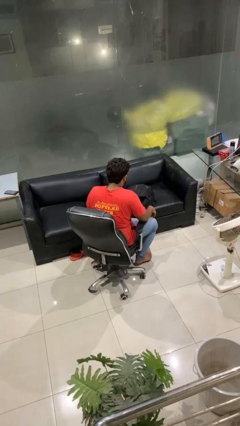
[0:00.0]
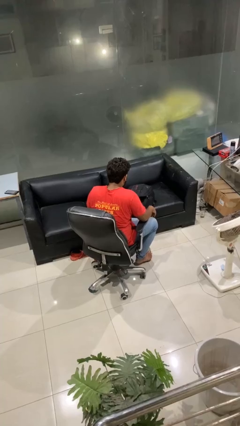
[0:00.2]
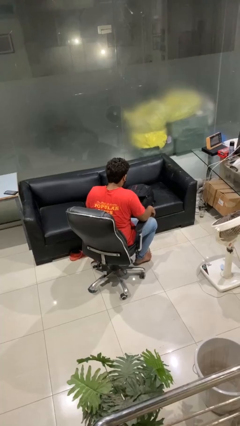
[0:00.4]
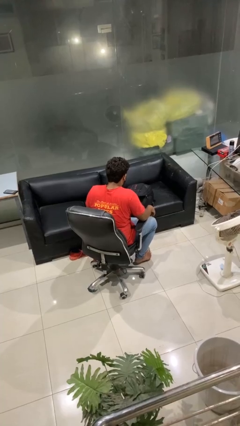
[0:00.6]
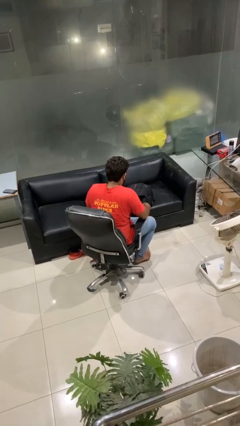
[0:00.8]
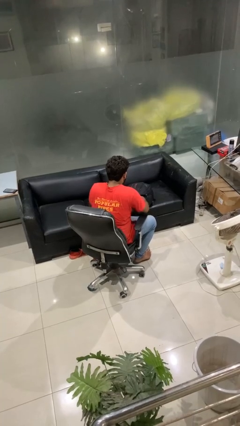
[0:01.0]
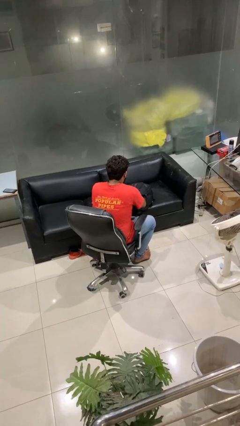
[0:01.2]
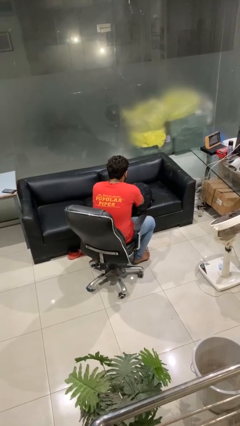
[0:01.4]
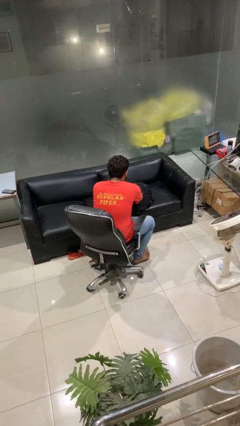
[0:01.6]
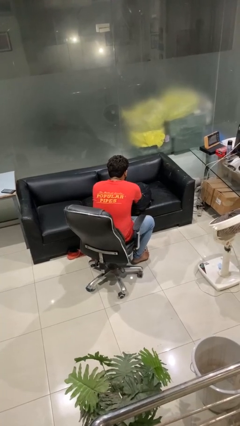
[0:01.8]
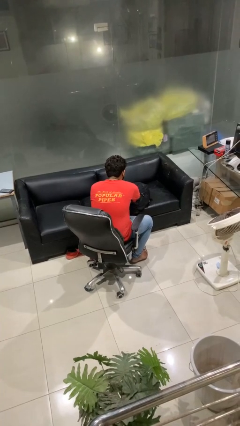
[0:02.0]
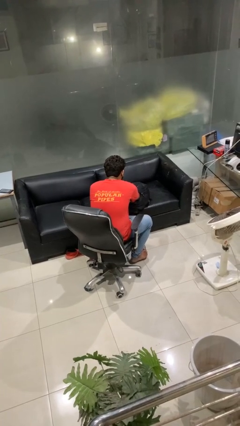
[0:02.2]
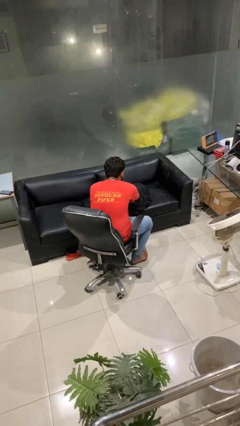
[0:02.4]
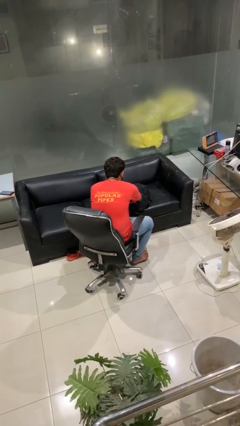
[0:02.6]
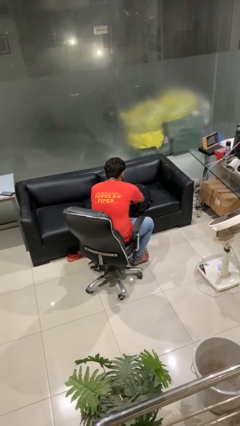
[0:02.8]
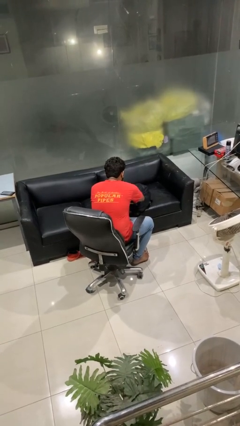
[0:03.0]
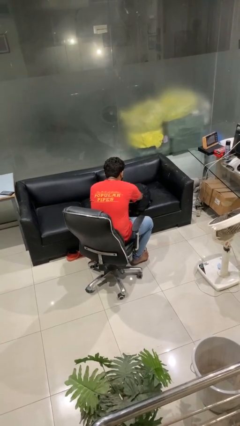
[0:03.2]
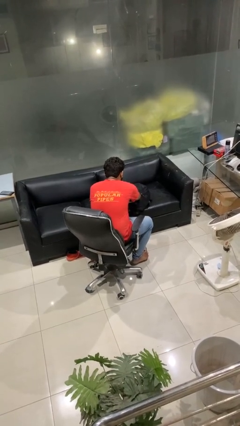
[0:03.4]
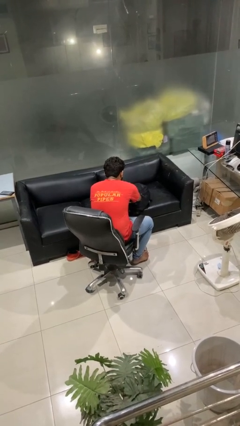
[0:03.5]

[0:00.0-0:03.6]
person searches in backpack

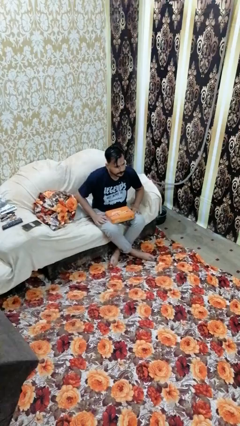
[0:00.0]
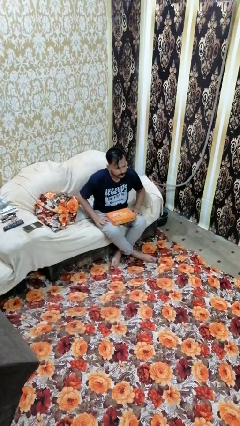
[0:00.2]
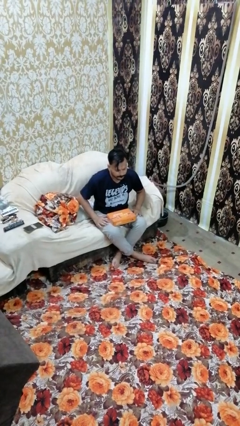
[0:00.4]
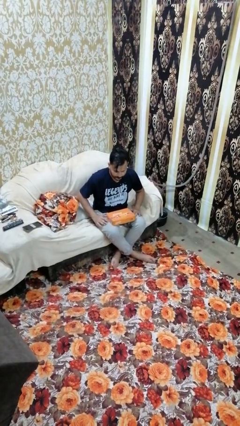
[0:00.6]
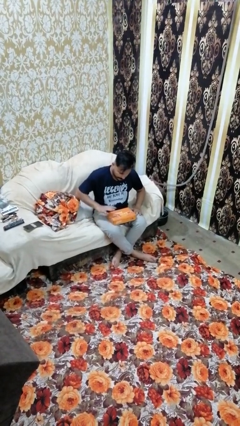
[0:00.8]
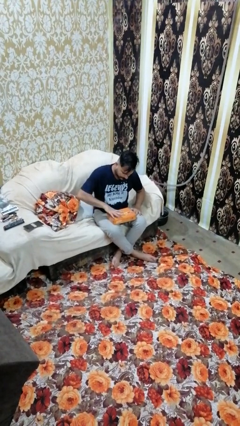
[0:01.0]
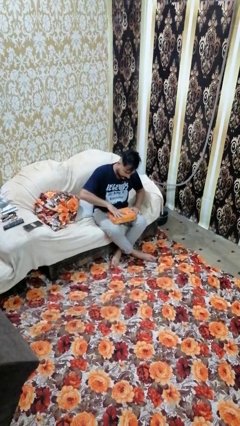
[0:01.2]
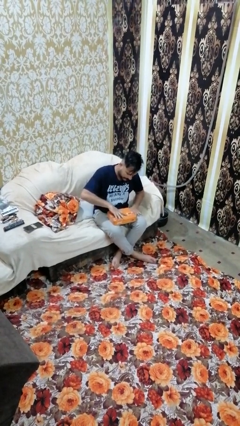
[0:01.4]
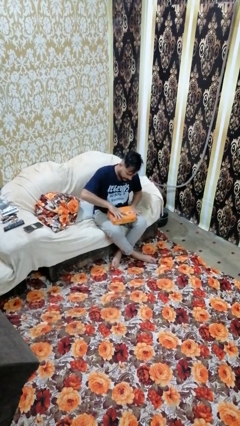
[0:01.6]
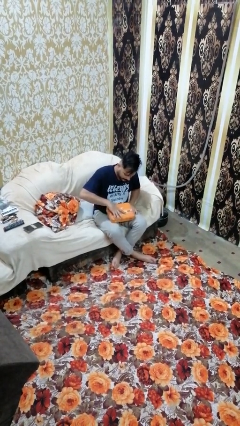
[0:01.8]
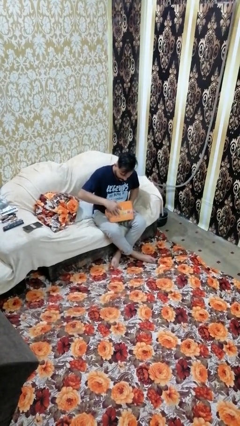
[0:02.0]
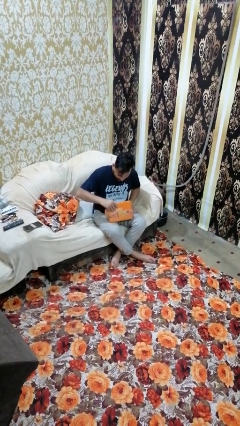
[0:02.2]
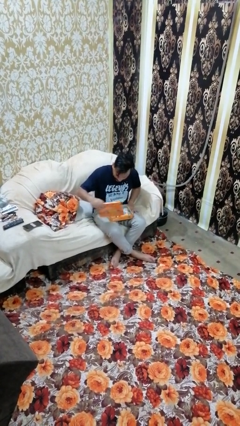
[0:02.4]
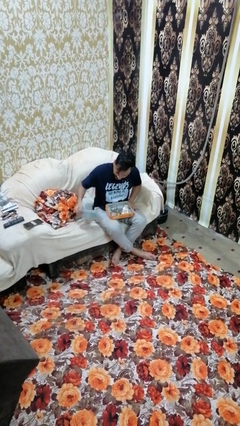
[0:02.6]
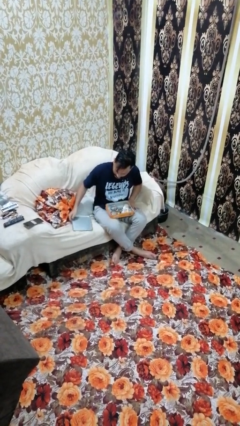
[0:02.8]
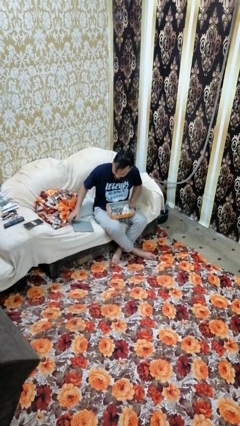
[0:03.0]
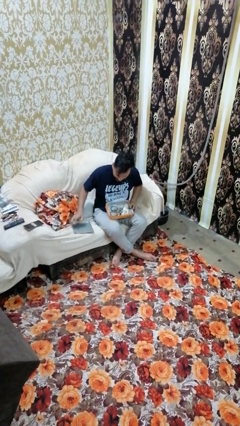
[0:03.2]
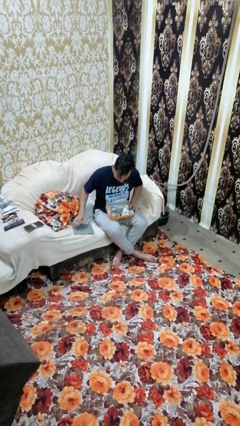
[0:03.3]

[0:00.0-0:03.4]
person opens jewelry box

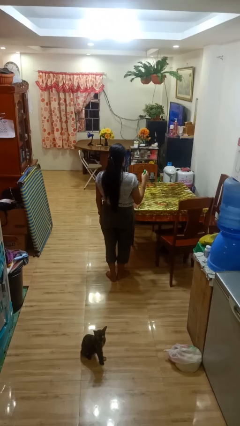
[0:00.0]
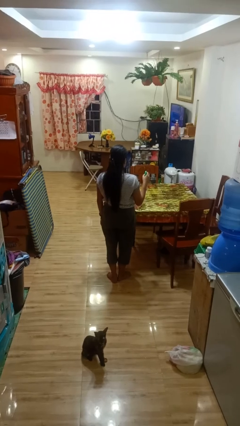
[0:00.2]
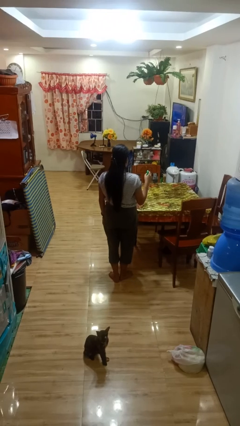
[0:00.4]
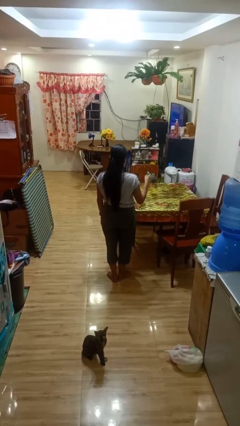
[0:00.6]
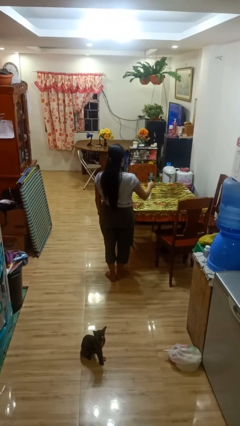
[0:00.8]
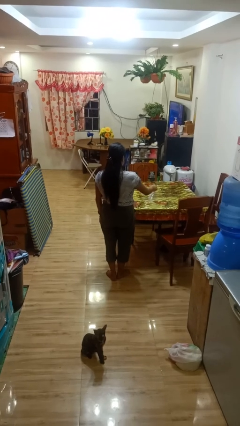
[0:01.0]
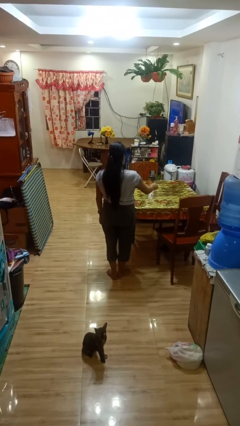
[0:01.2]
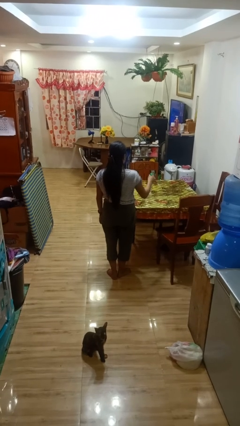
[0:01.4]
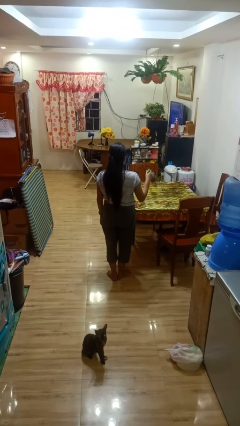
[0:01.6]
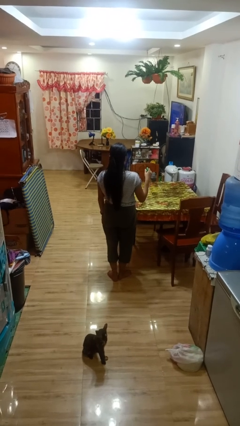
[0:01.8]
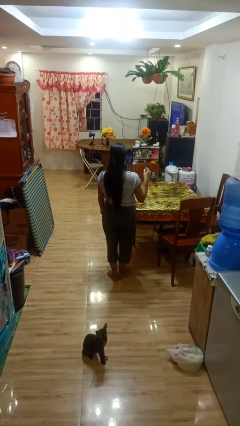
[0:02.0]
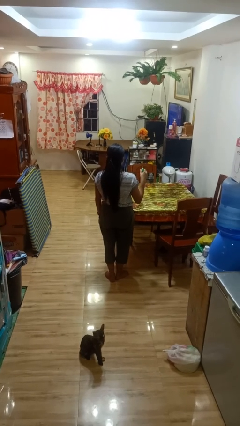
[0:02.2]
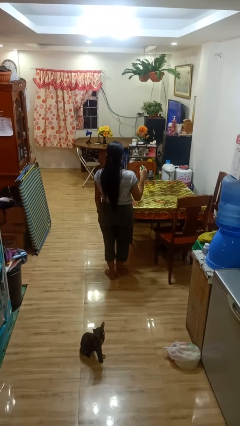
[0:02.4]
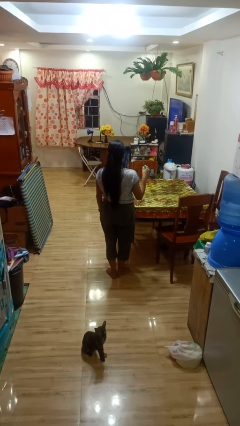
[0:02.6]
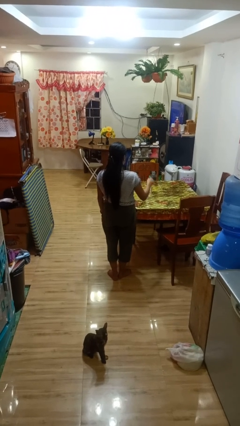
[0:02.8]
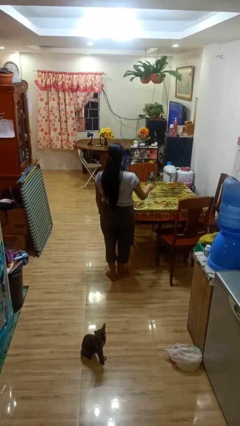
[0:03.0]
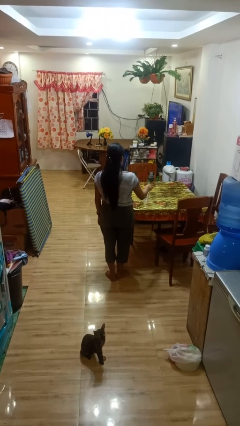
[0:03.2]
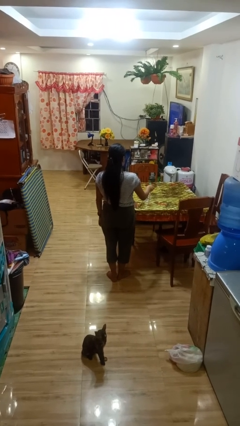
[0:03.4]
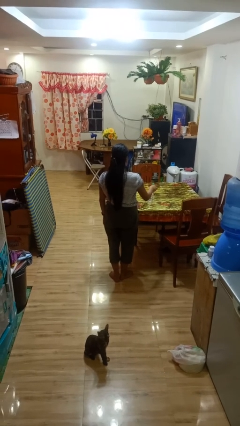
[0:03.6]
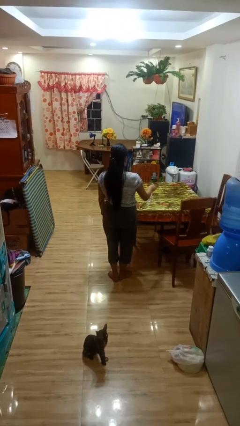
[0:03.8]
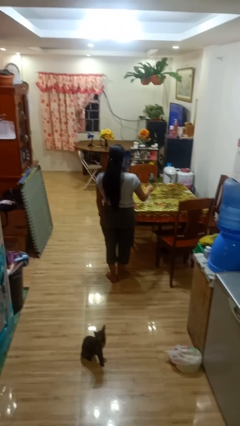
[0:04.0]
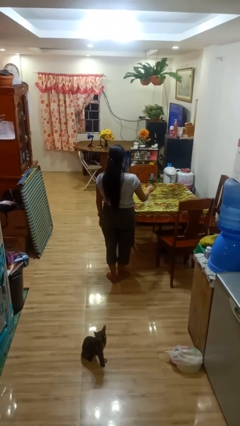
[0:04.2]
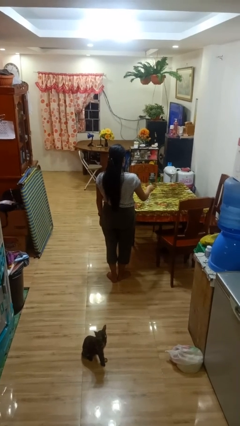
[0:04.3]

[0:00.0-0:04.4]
person sprays from bottle

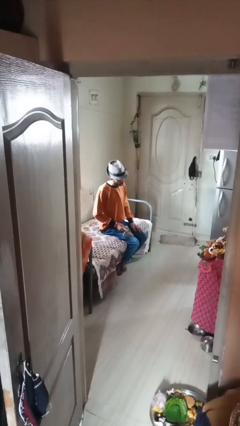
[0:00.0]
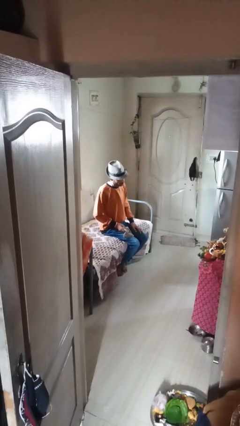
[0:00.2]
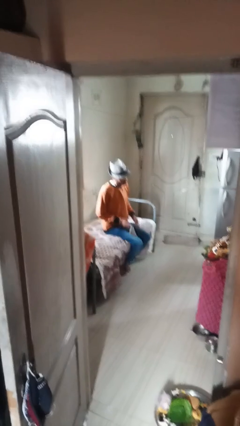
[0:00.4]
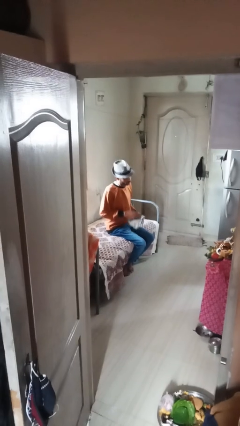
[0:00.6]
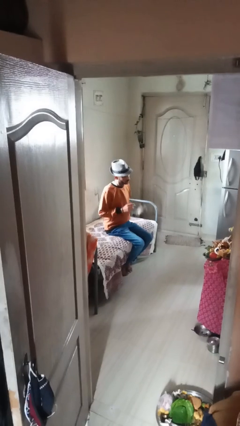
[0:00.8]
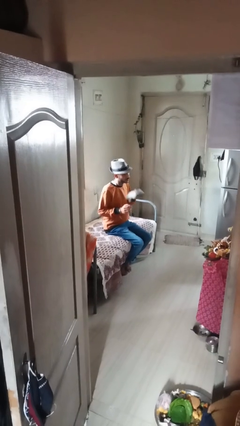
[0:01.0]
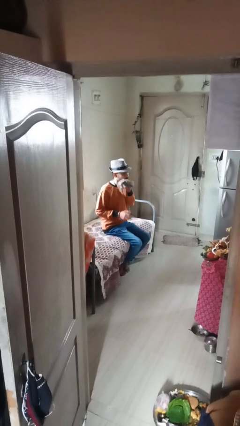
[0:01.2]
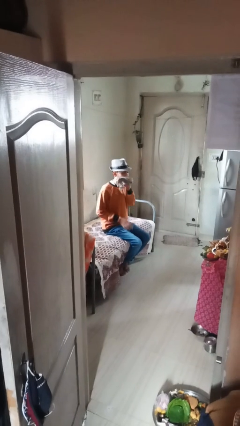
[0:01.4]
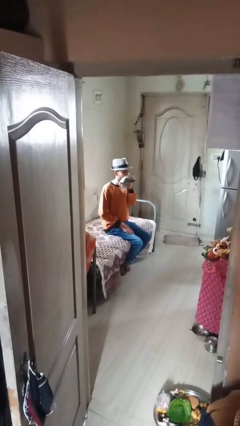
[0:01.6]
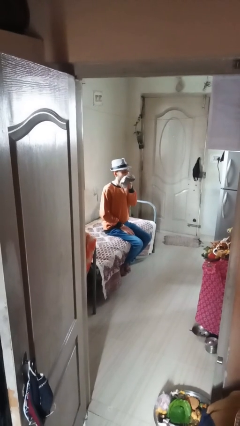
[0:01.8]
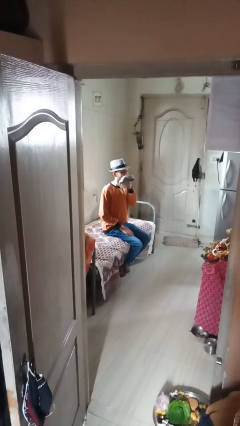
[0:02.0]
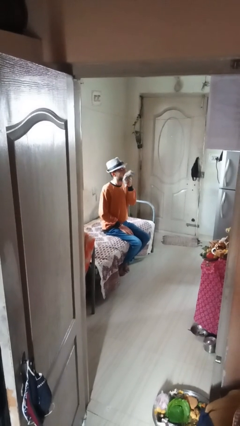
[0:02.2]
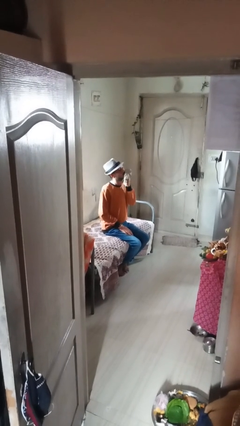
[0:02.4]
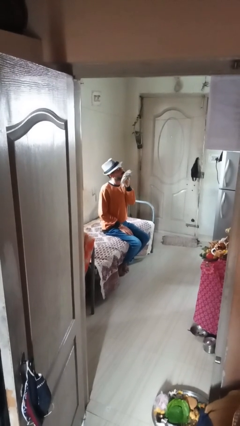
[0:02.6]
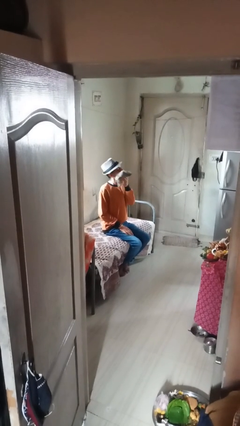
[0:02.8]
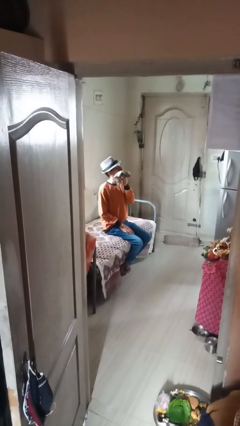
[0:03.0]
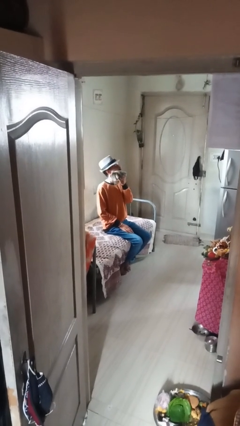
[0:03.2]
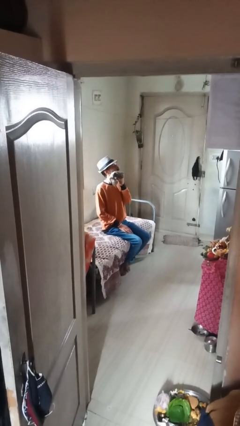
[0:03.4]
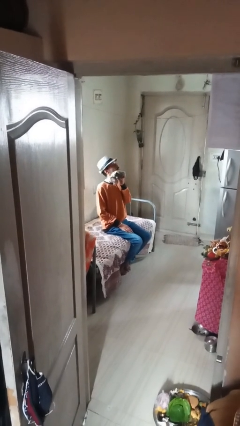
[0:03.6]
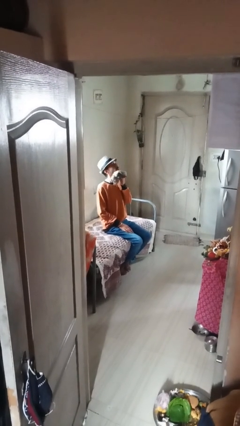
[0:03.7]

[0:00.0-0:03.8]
person wipes mouth with napkin

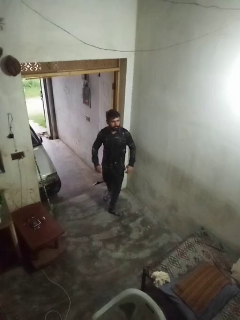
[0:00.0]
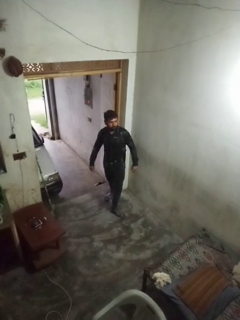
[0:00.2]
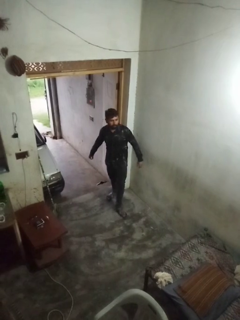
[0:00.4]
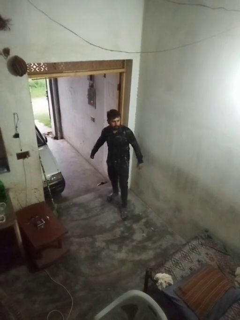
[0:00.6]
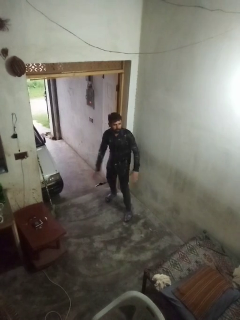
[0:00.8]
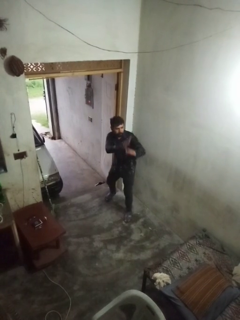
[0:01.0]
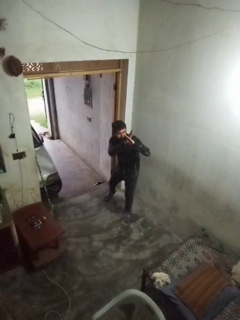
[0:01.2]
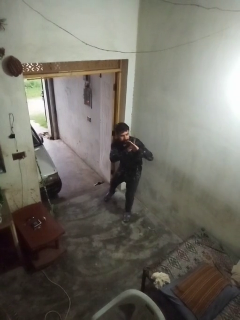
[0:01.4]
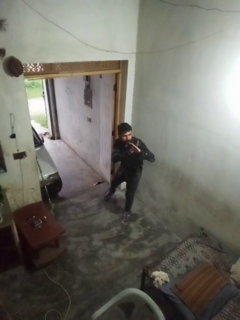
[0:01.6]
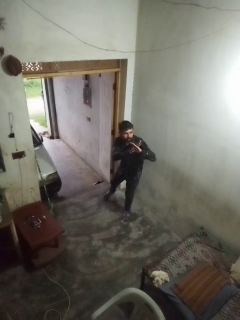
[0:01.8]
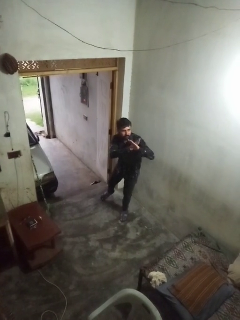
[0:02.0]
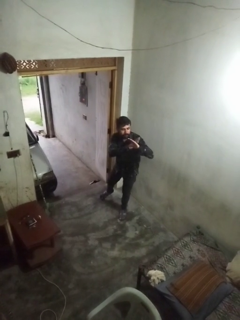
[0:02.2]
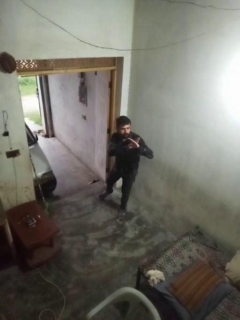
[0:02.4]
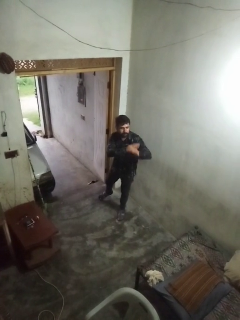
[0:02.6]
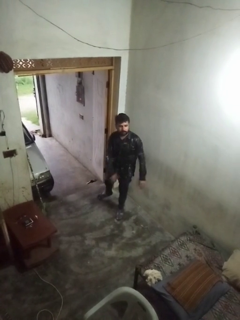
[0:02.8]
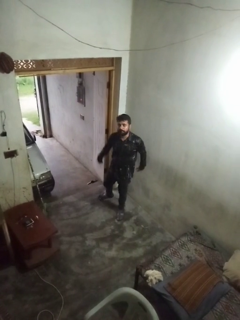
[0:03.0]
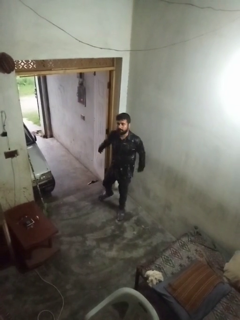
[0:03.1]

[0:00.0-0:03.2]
person karate chop
